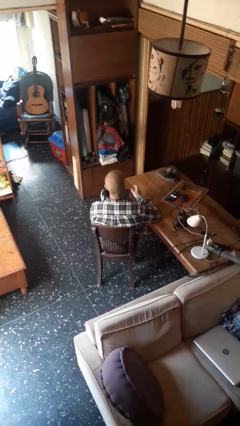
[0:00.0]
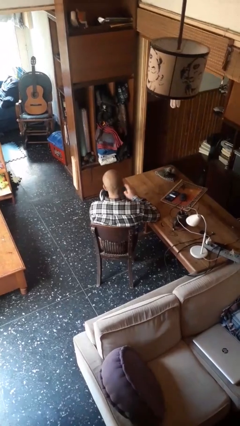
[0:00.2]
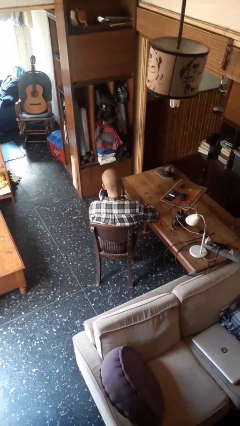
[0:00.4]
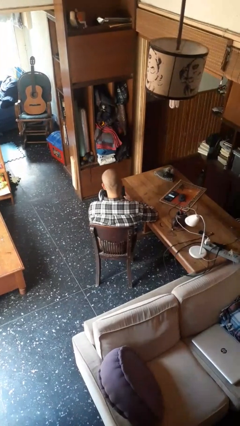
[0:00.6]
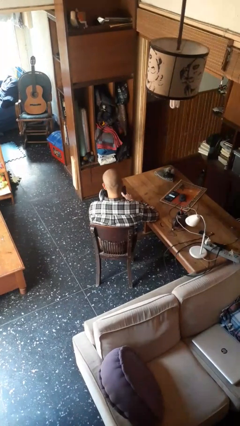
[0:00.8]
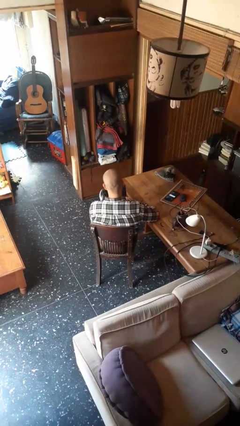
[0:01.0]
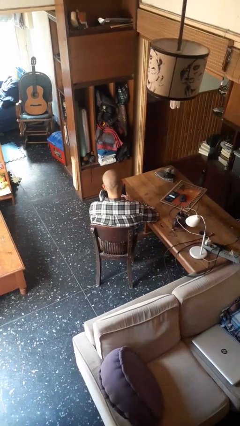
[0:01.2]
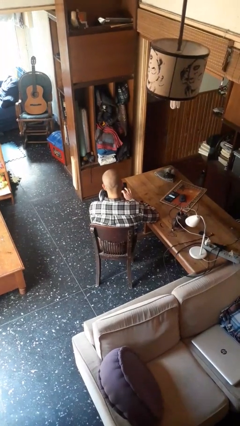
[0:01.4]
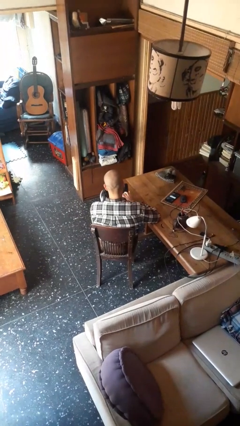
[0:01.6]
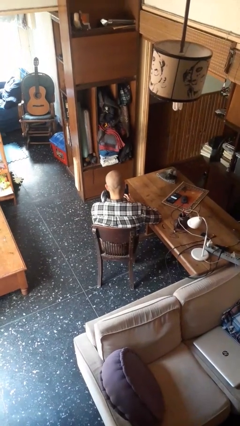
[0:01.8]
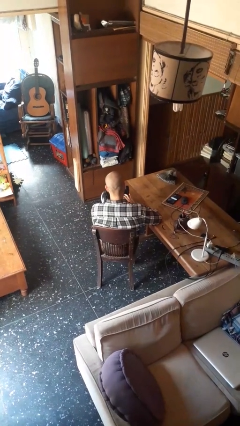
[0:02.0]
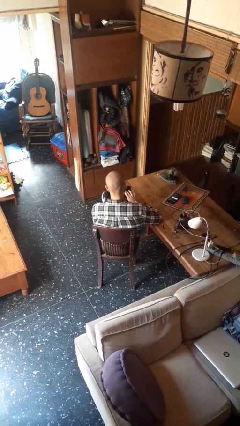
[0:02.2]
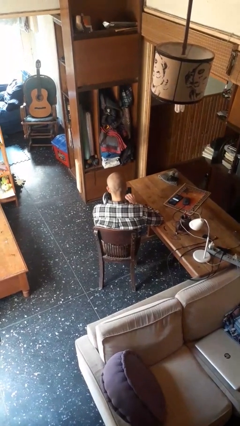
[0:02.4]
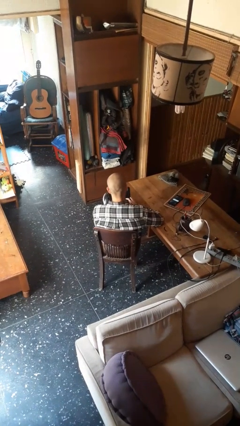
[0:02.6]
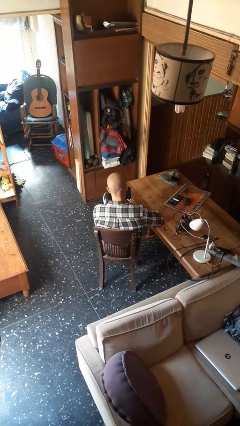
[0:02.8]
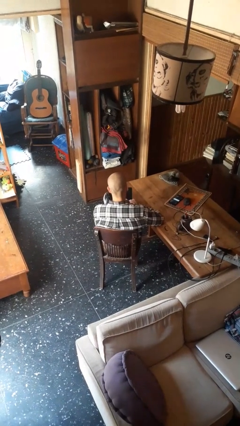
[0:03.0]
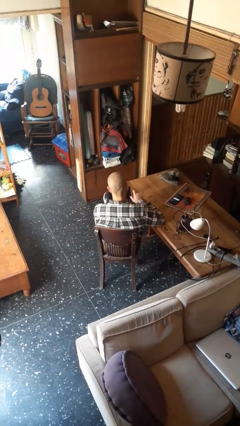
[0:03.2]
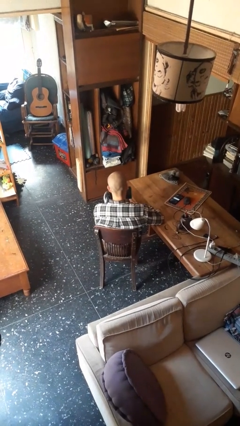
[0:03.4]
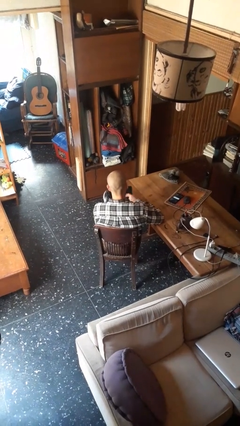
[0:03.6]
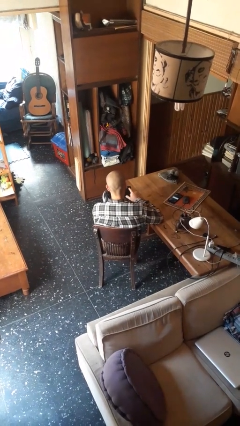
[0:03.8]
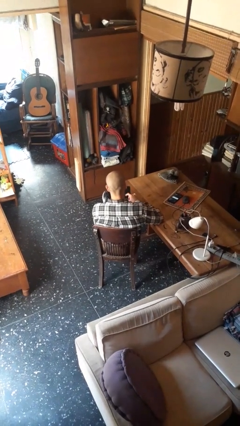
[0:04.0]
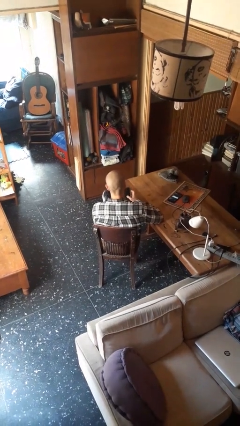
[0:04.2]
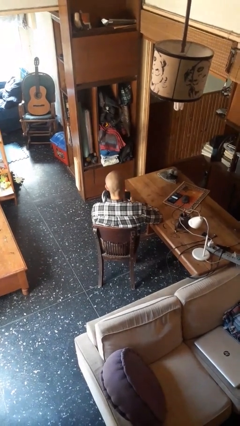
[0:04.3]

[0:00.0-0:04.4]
person interacts with tablet

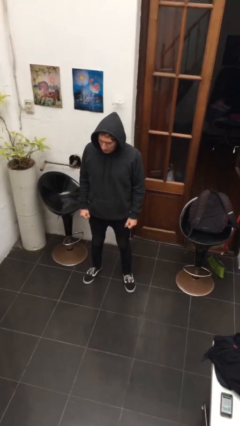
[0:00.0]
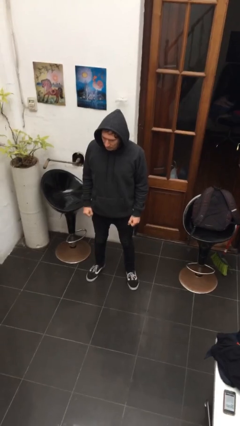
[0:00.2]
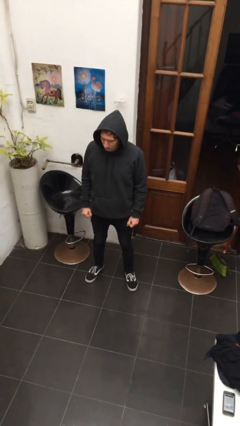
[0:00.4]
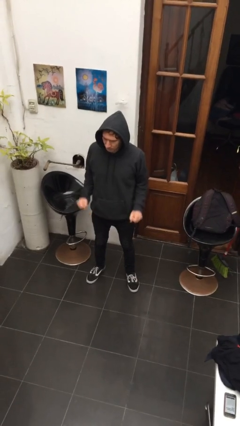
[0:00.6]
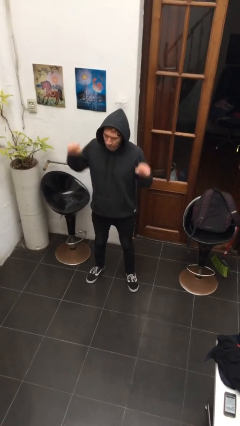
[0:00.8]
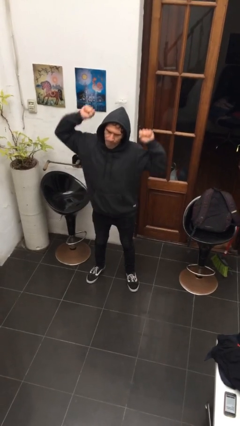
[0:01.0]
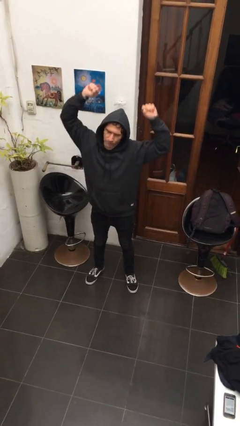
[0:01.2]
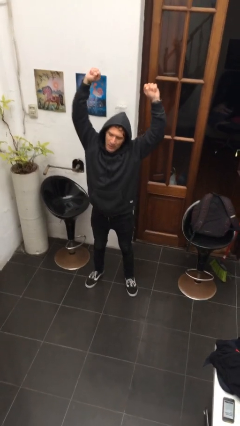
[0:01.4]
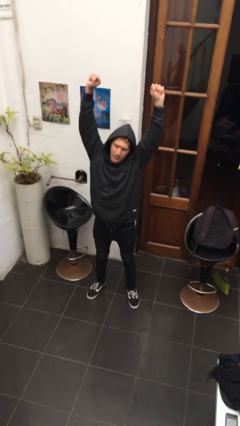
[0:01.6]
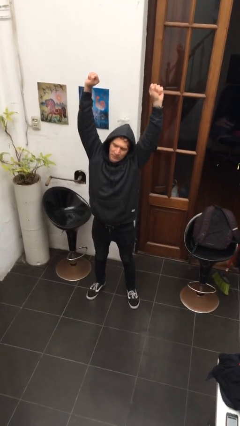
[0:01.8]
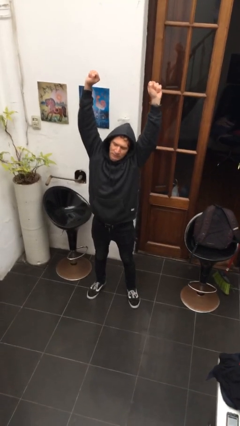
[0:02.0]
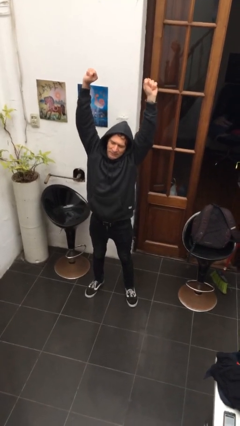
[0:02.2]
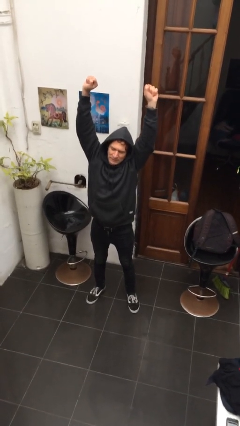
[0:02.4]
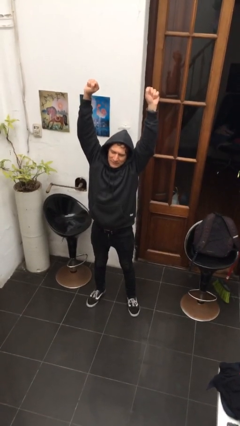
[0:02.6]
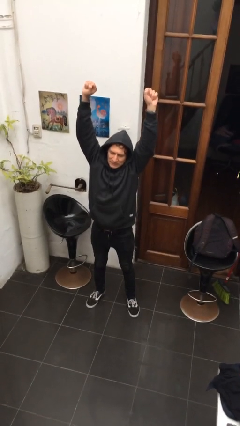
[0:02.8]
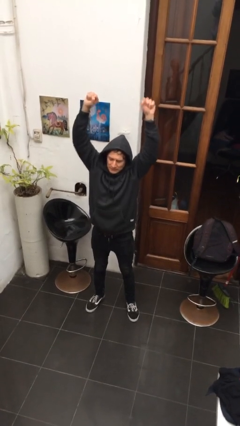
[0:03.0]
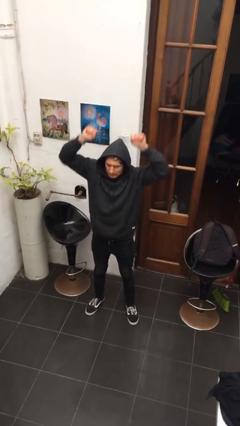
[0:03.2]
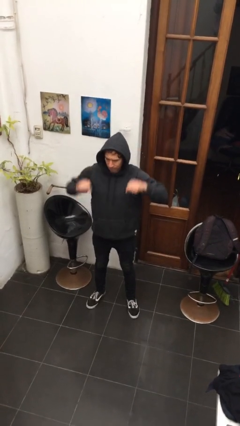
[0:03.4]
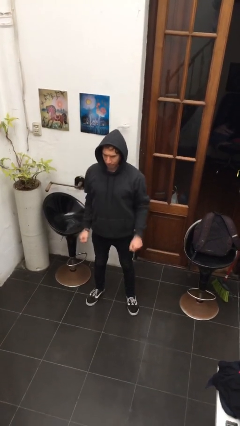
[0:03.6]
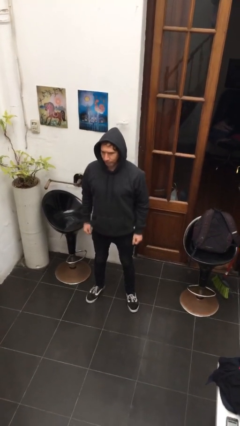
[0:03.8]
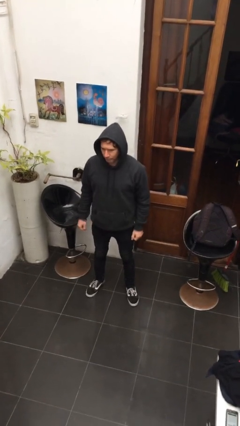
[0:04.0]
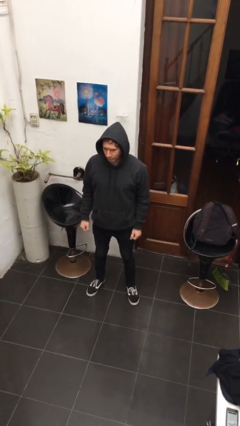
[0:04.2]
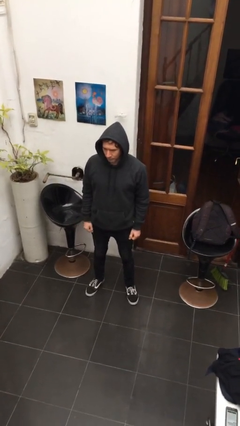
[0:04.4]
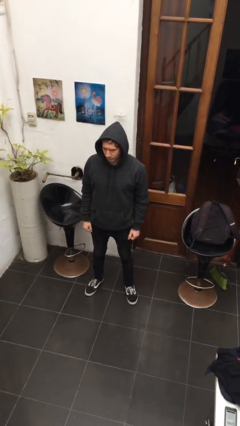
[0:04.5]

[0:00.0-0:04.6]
person stretches arms over head

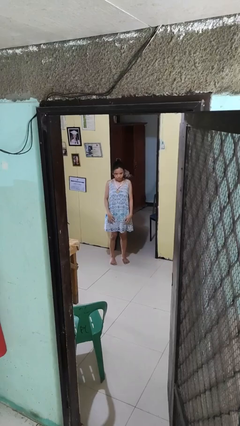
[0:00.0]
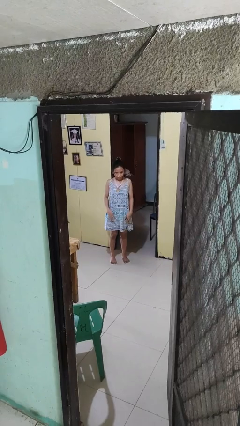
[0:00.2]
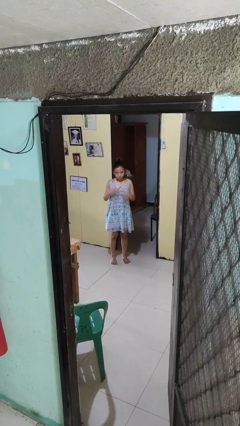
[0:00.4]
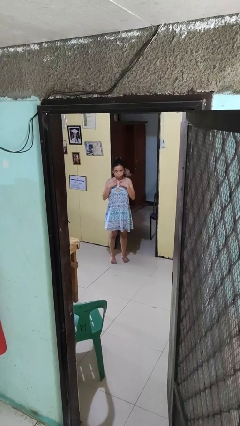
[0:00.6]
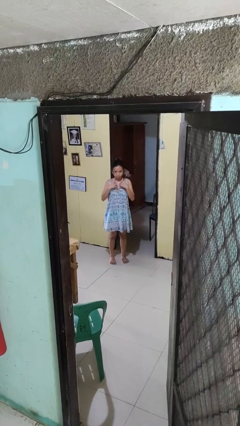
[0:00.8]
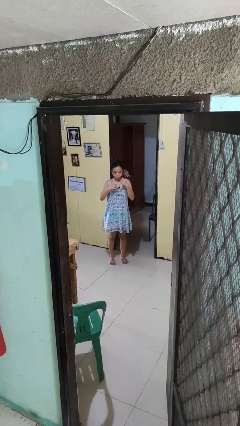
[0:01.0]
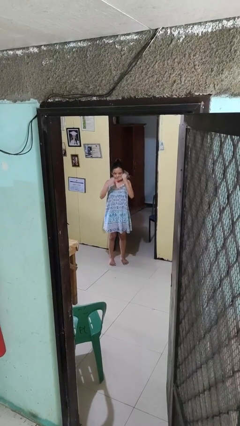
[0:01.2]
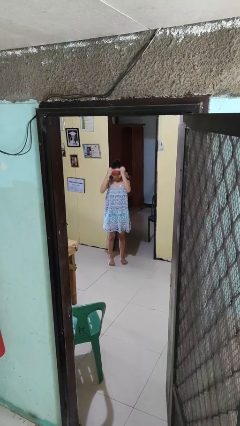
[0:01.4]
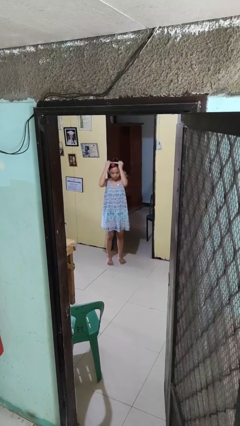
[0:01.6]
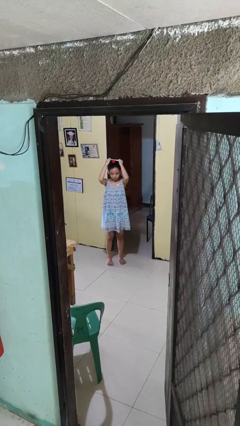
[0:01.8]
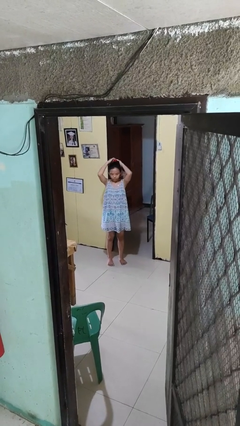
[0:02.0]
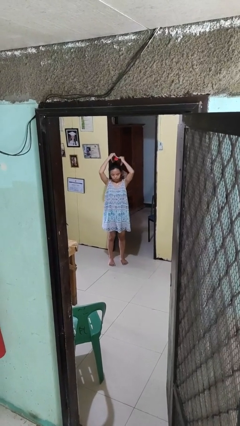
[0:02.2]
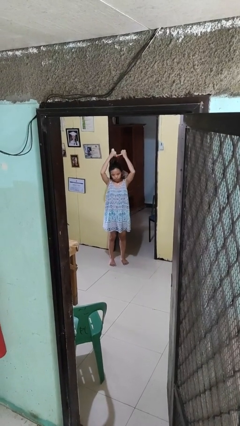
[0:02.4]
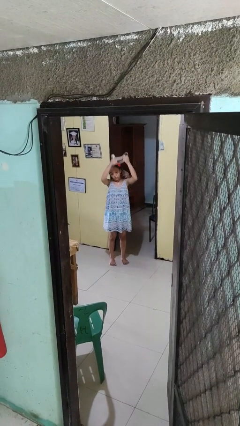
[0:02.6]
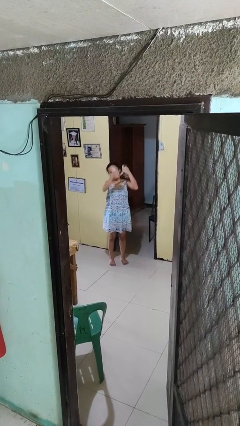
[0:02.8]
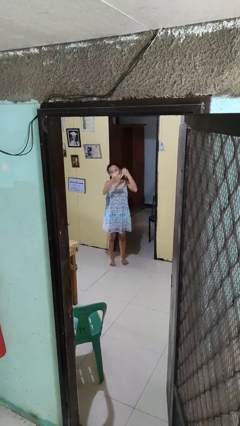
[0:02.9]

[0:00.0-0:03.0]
person takes off necklace

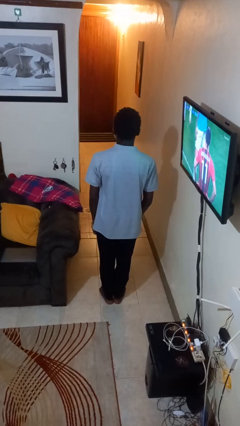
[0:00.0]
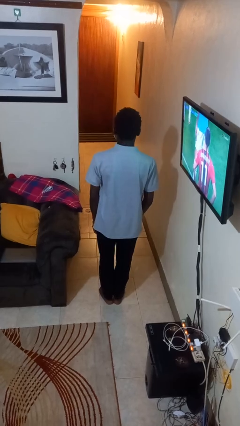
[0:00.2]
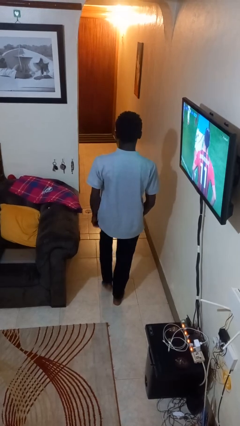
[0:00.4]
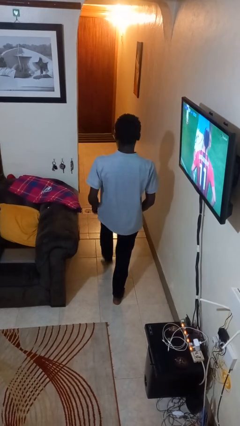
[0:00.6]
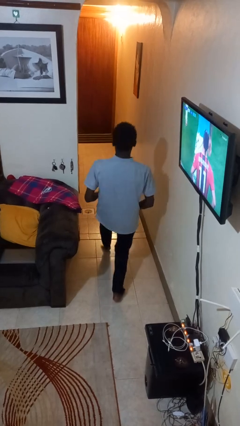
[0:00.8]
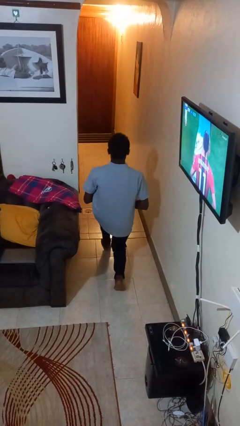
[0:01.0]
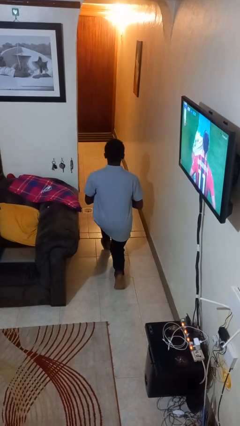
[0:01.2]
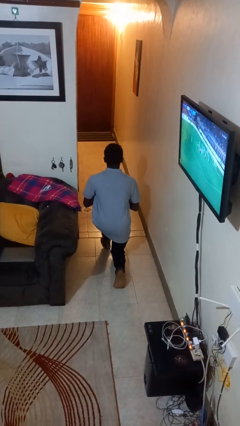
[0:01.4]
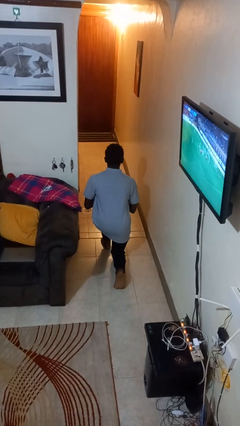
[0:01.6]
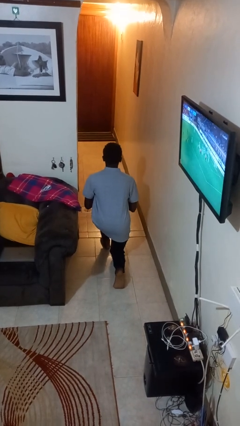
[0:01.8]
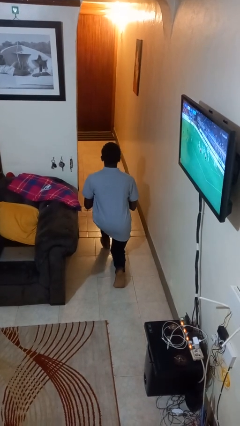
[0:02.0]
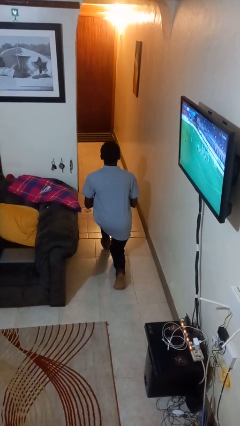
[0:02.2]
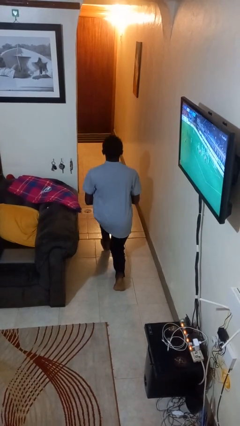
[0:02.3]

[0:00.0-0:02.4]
person exercises with lunges

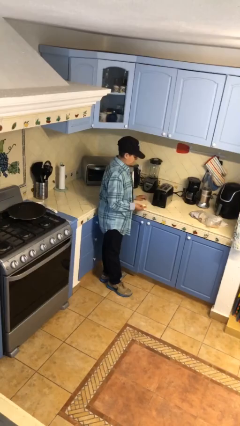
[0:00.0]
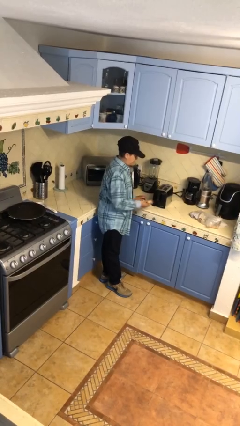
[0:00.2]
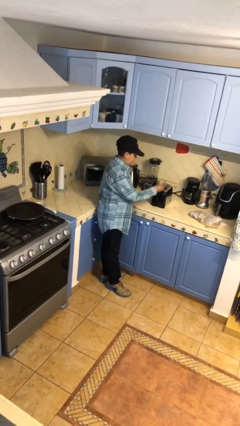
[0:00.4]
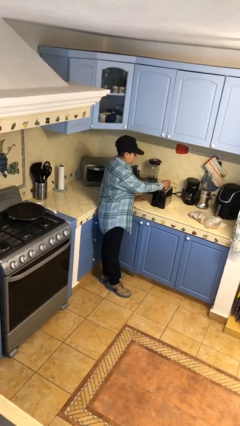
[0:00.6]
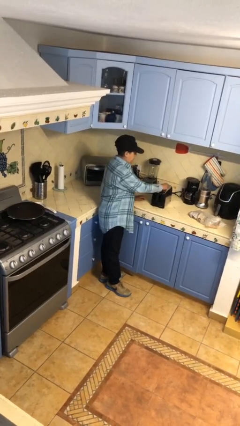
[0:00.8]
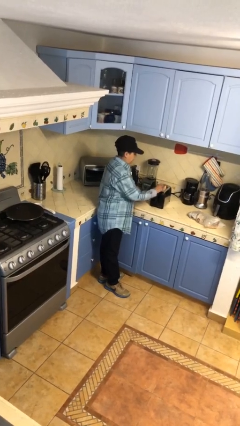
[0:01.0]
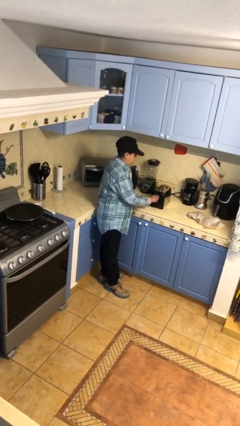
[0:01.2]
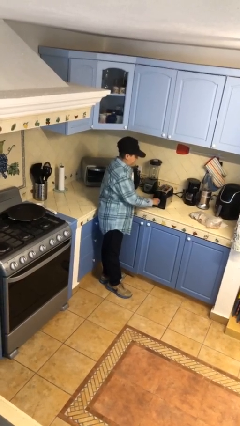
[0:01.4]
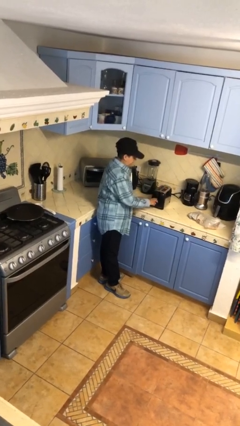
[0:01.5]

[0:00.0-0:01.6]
person puts object into toaster

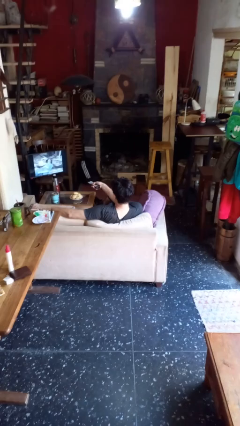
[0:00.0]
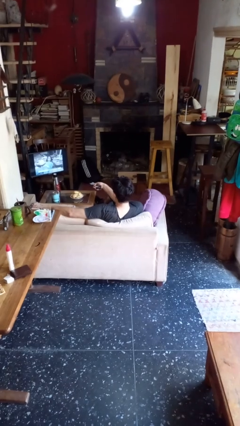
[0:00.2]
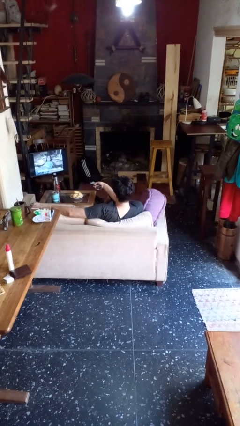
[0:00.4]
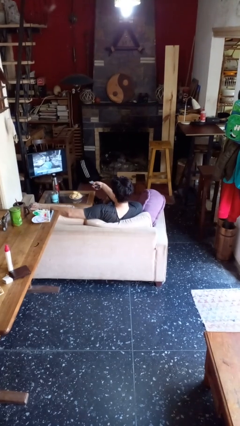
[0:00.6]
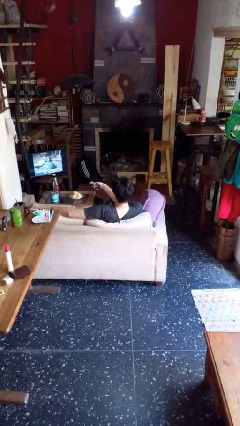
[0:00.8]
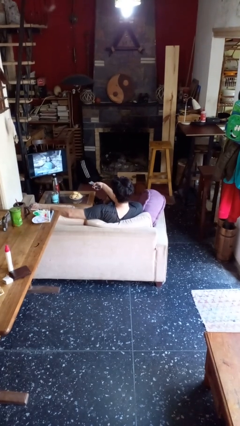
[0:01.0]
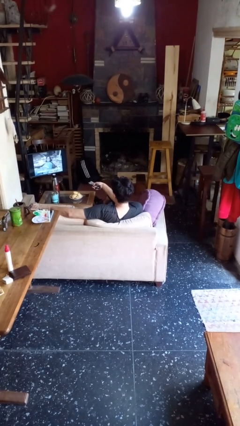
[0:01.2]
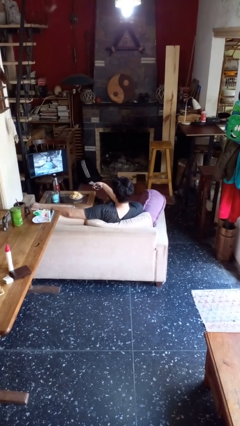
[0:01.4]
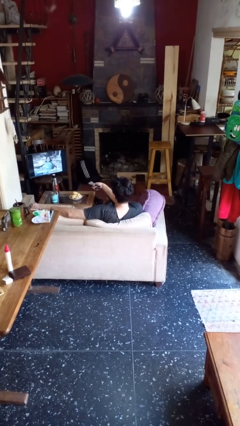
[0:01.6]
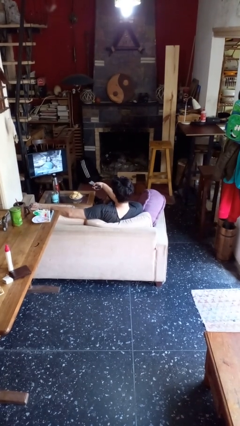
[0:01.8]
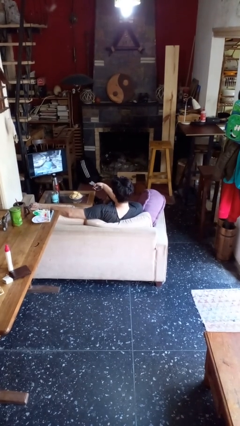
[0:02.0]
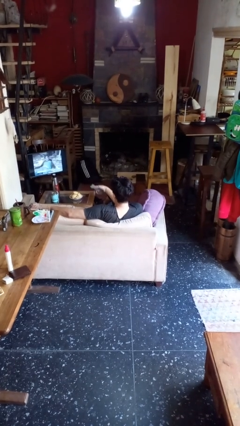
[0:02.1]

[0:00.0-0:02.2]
person uses television remote
